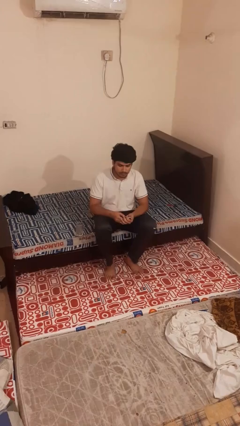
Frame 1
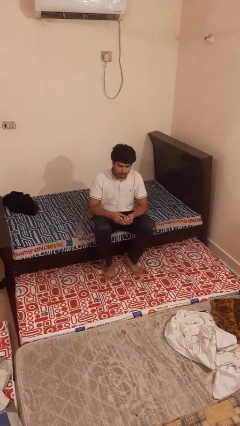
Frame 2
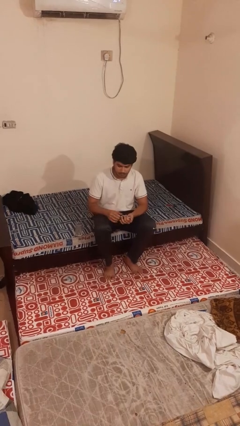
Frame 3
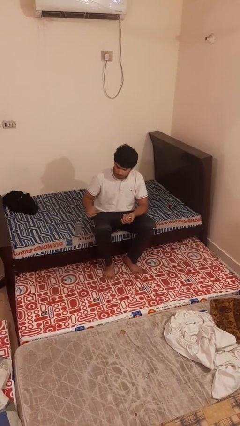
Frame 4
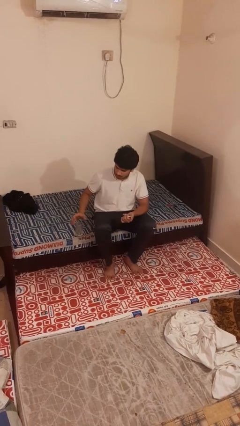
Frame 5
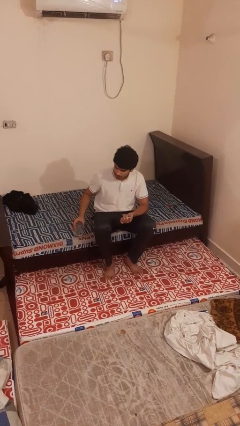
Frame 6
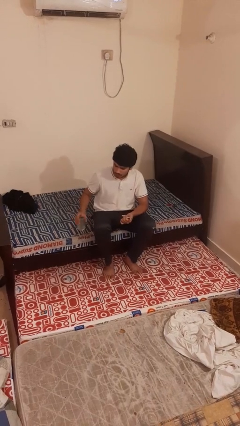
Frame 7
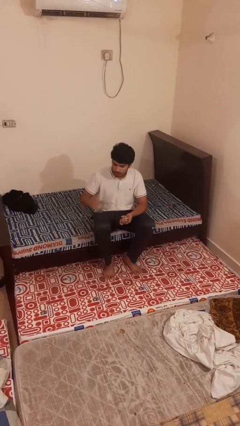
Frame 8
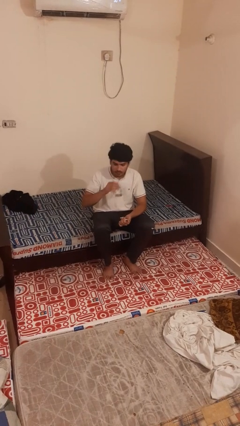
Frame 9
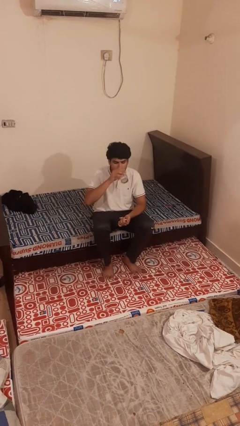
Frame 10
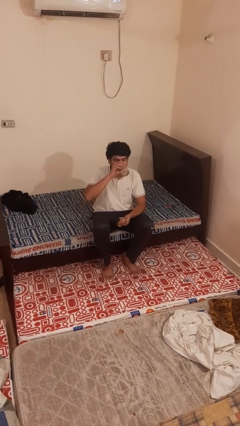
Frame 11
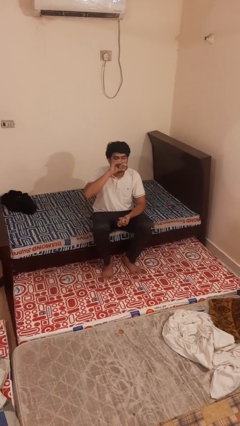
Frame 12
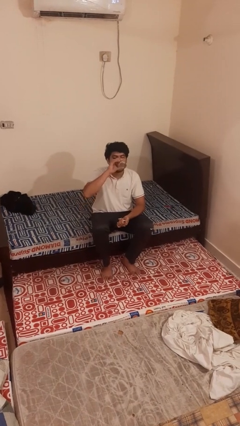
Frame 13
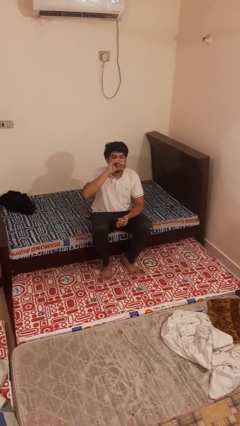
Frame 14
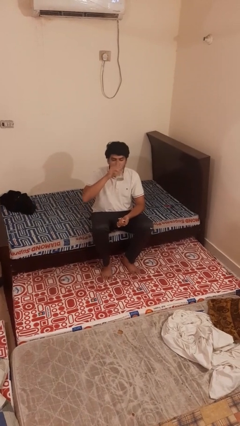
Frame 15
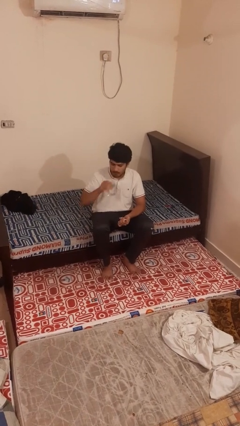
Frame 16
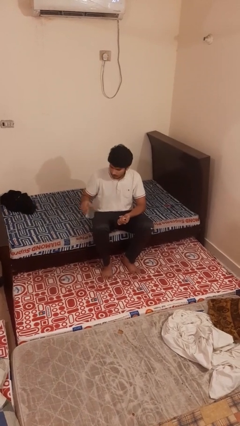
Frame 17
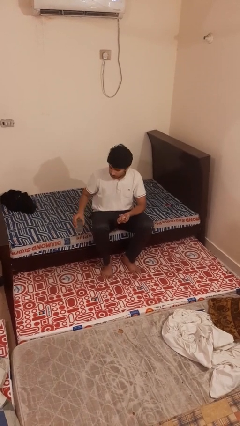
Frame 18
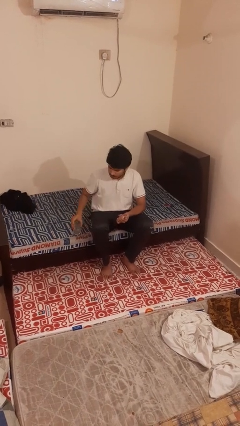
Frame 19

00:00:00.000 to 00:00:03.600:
person drinks from cup

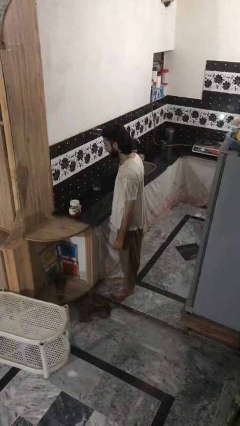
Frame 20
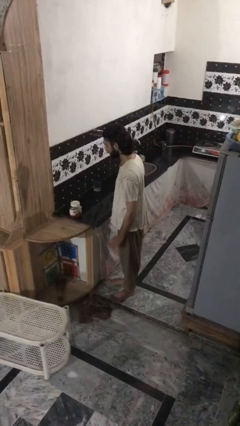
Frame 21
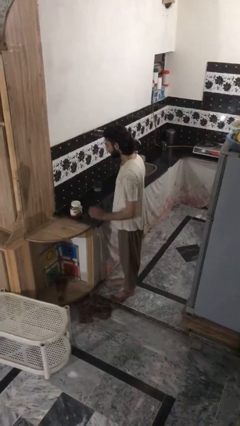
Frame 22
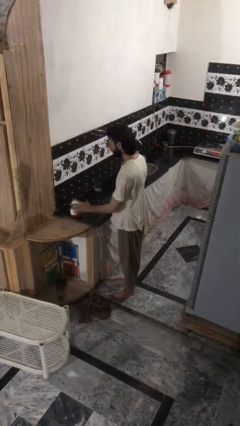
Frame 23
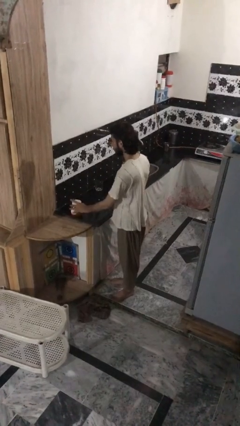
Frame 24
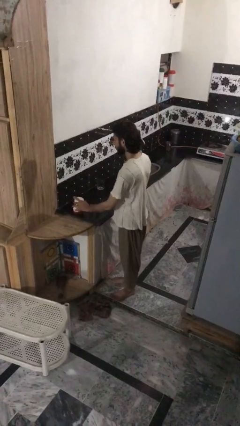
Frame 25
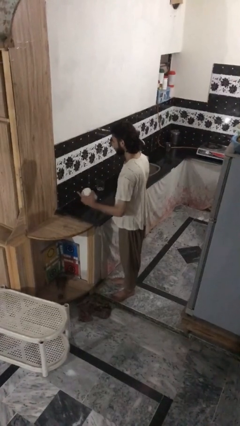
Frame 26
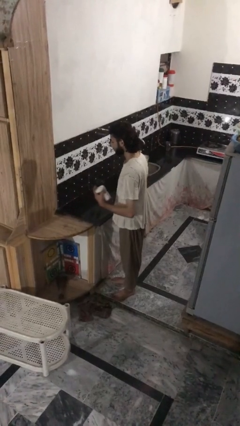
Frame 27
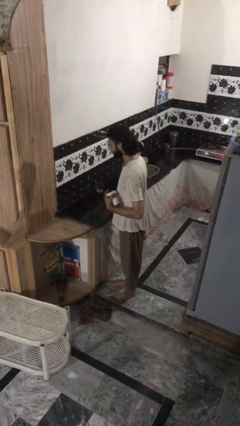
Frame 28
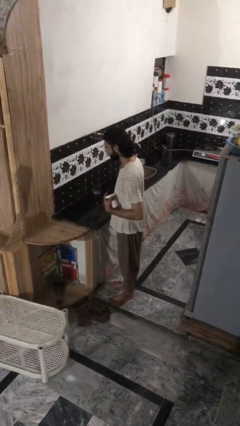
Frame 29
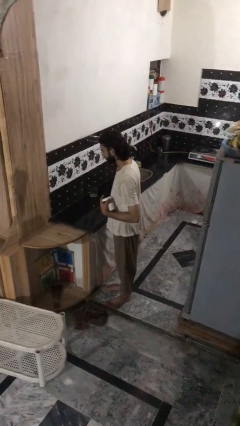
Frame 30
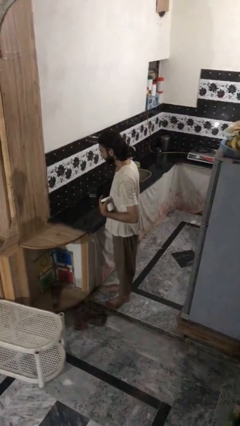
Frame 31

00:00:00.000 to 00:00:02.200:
person picks up object from countertop

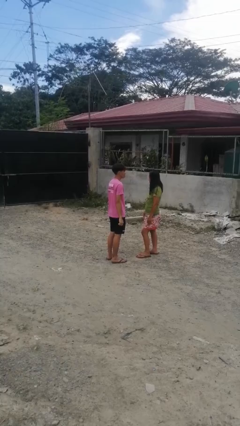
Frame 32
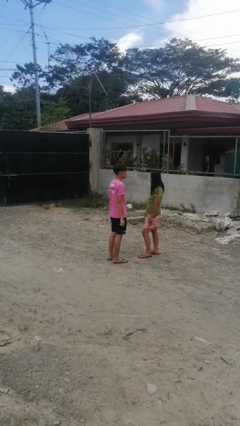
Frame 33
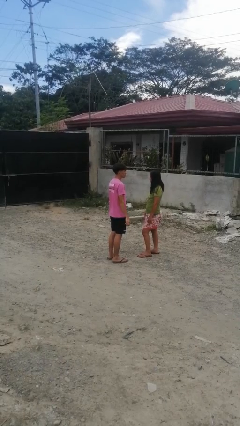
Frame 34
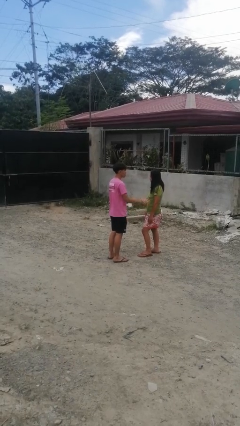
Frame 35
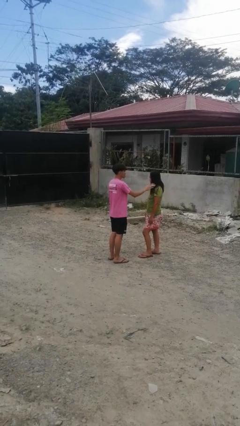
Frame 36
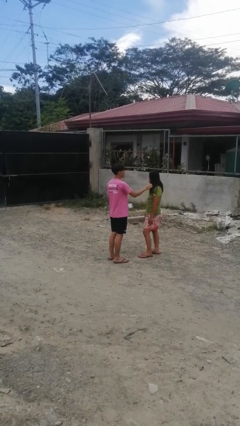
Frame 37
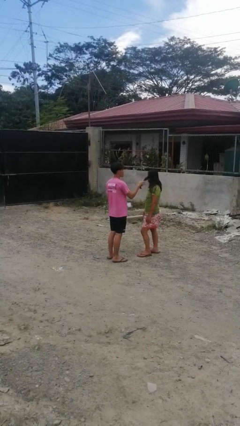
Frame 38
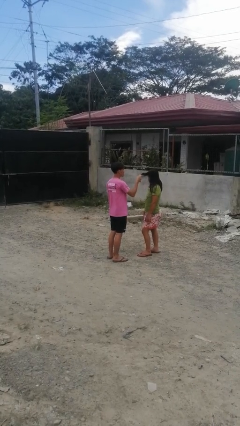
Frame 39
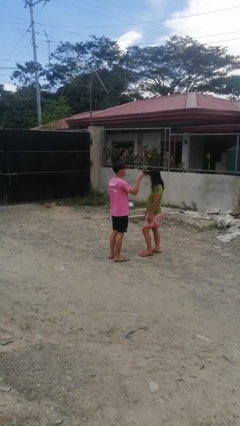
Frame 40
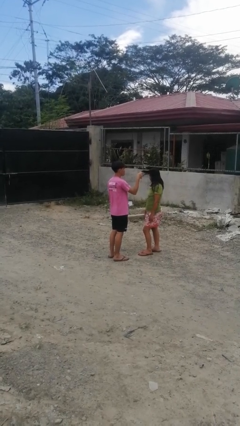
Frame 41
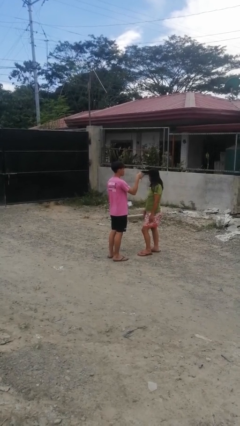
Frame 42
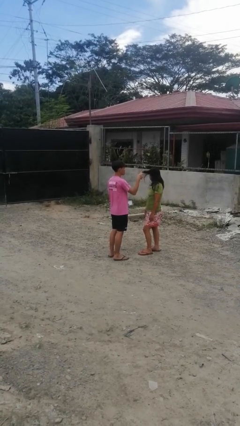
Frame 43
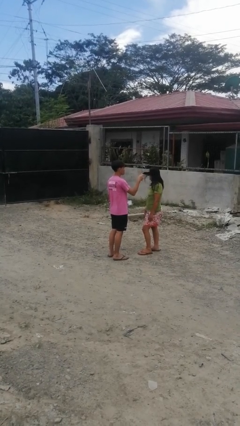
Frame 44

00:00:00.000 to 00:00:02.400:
person grabs person by hair

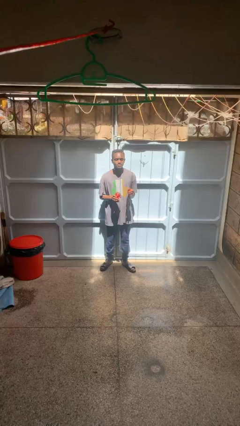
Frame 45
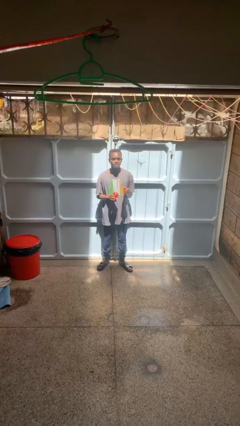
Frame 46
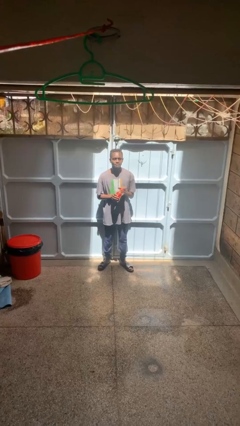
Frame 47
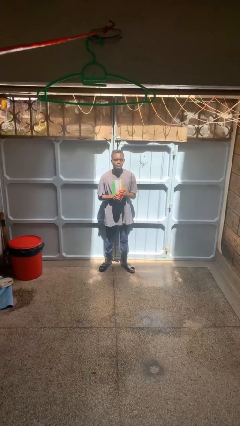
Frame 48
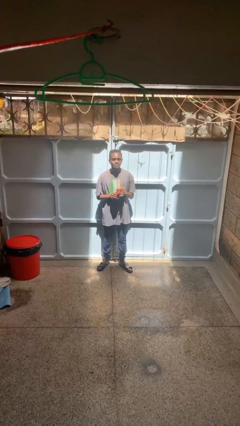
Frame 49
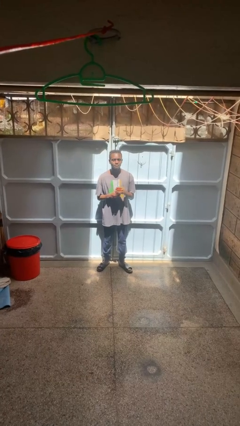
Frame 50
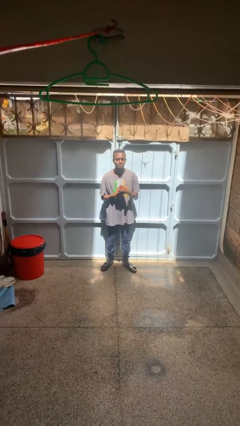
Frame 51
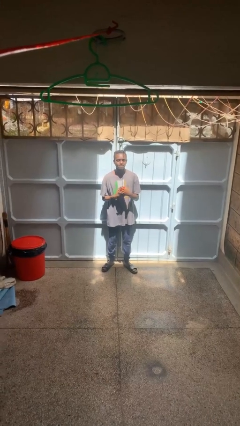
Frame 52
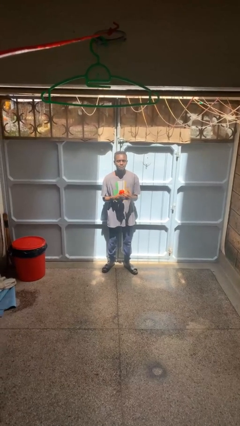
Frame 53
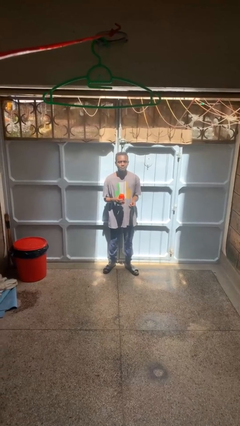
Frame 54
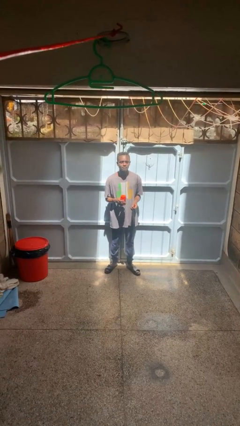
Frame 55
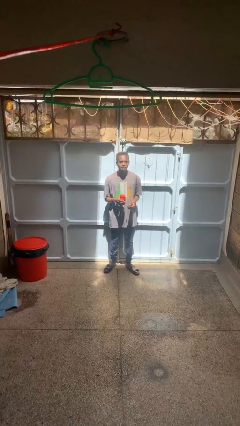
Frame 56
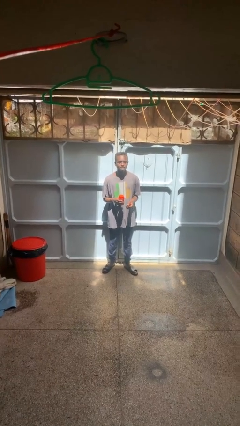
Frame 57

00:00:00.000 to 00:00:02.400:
person closes jar

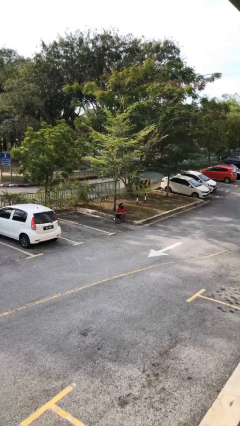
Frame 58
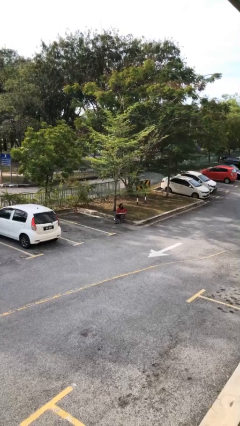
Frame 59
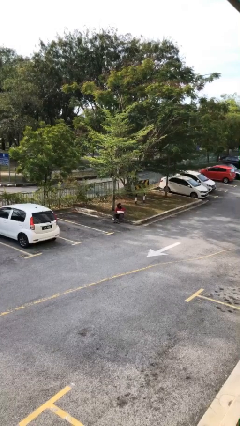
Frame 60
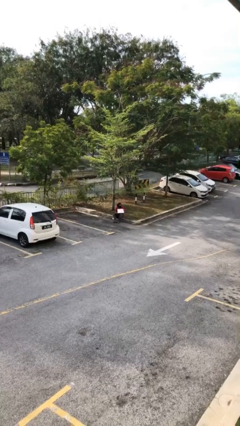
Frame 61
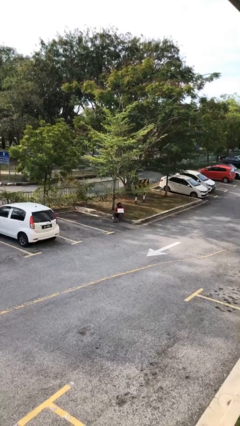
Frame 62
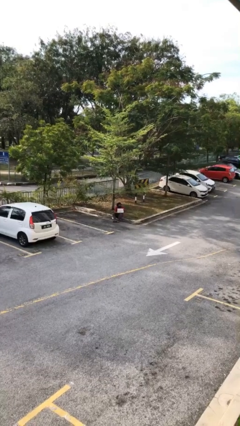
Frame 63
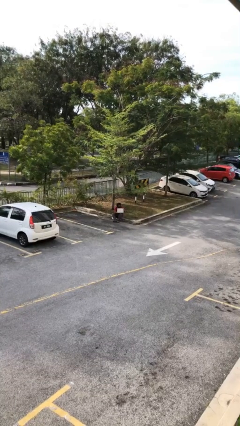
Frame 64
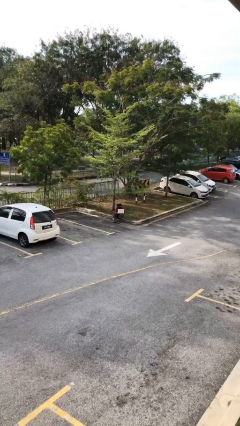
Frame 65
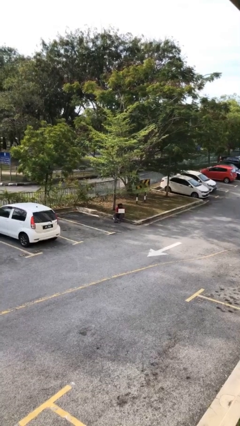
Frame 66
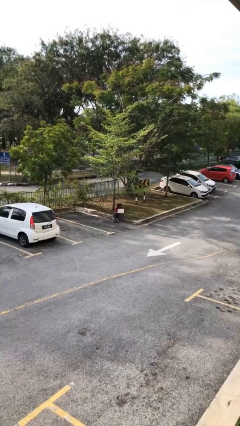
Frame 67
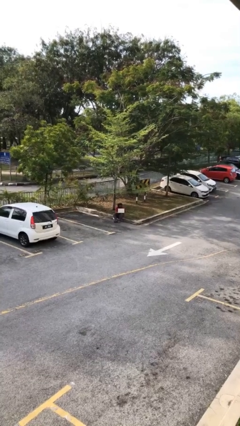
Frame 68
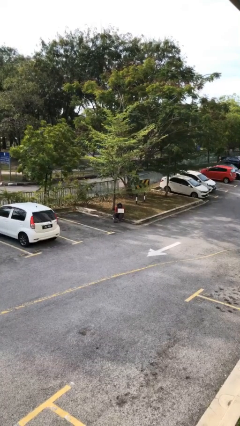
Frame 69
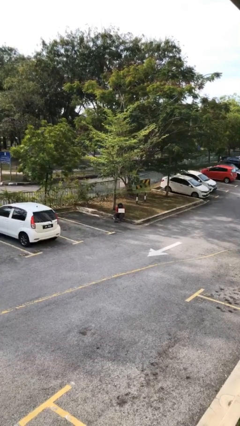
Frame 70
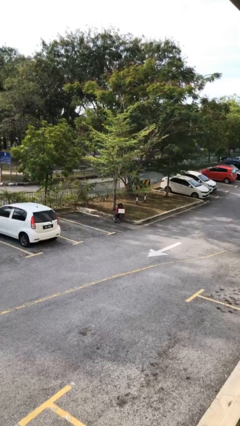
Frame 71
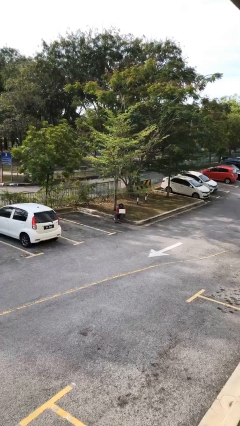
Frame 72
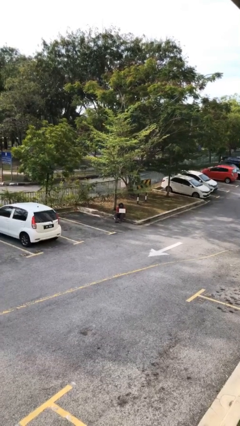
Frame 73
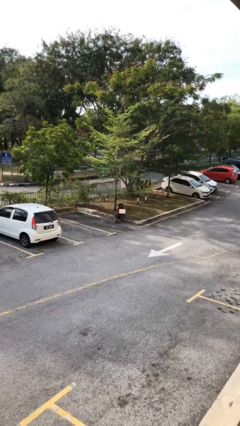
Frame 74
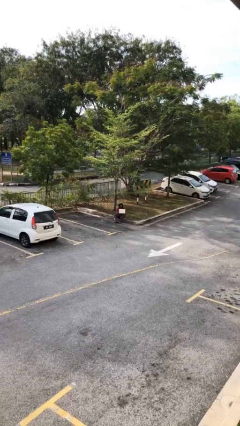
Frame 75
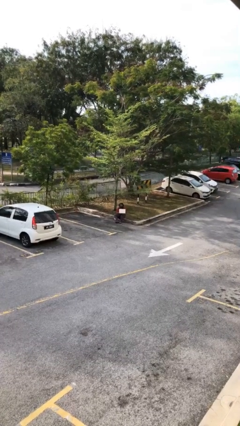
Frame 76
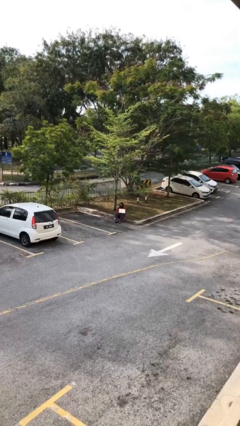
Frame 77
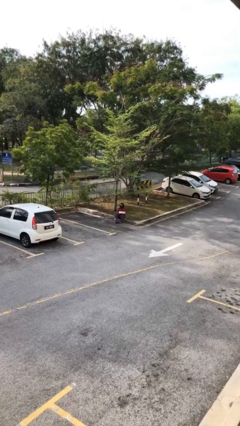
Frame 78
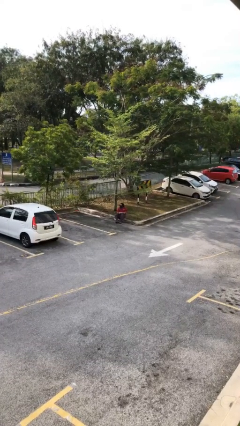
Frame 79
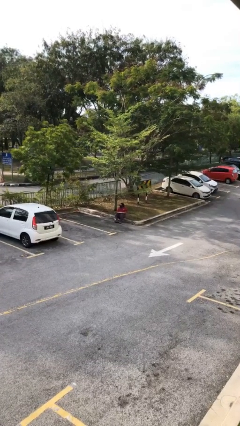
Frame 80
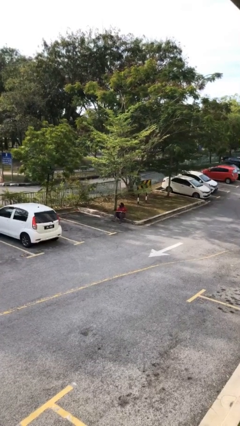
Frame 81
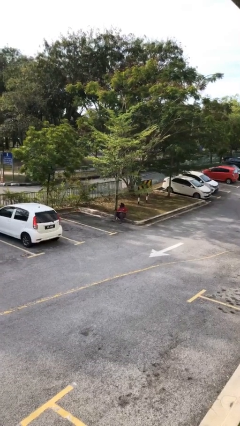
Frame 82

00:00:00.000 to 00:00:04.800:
person interacts with laptop

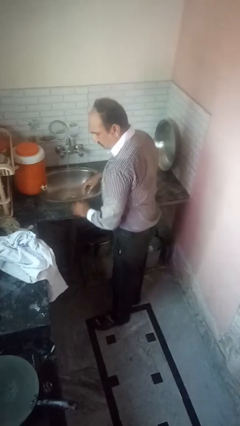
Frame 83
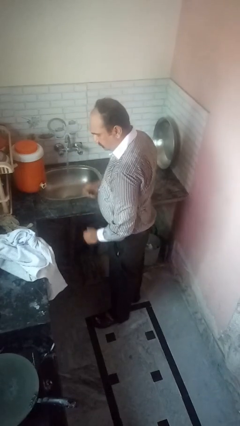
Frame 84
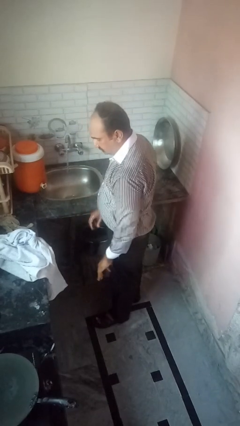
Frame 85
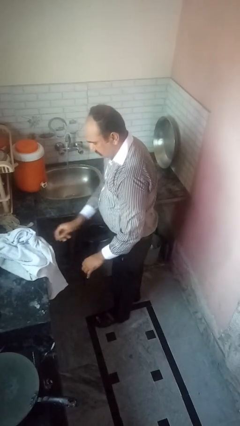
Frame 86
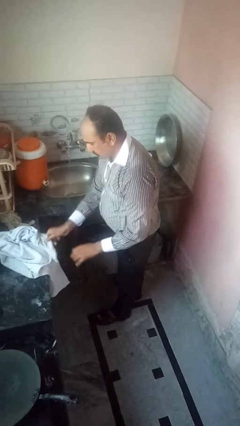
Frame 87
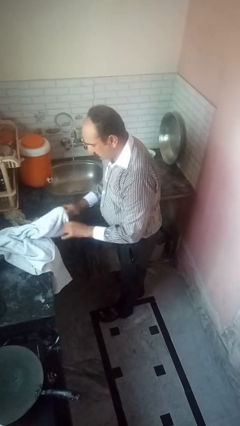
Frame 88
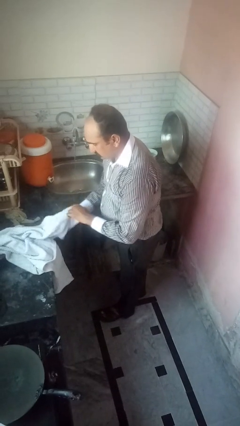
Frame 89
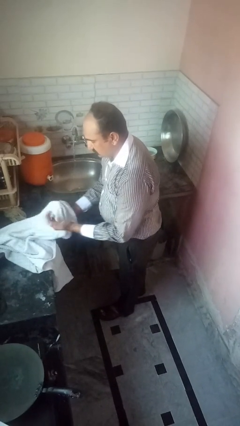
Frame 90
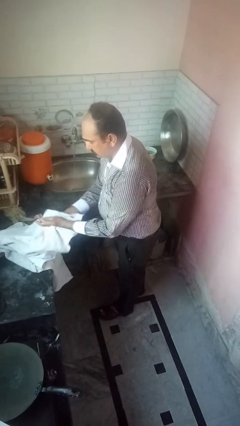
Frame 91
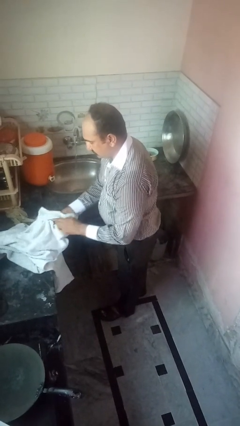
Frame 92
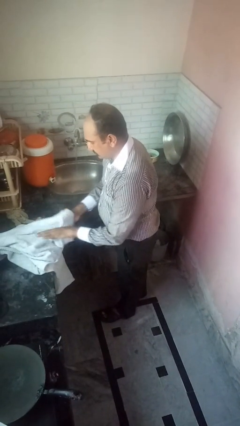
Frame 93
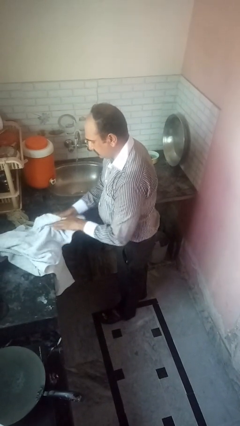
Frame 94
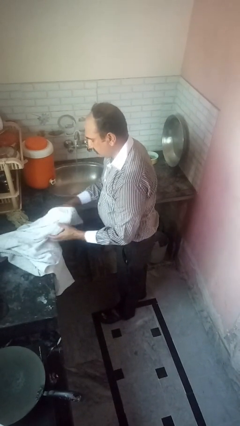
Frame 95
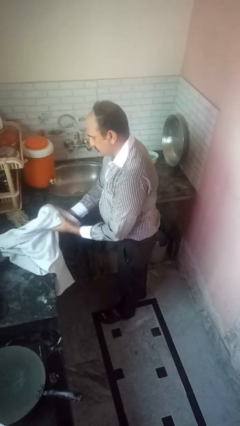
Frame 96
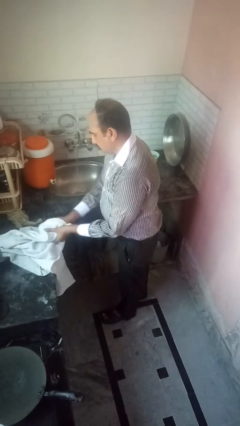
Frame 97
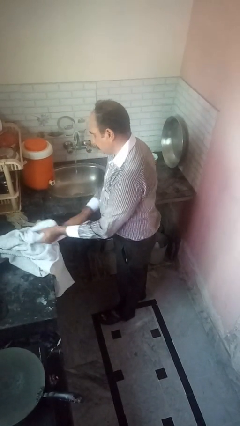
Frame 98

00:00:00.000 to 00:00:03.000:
person dries hands with towel
